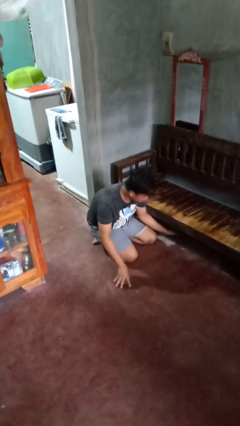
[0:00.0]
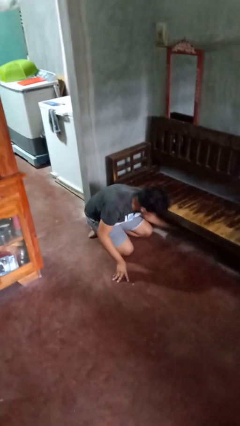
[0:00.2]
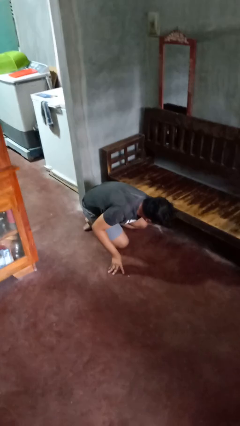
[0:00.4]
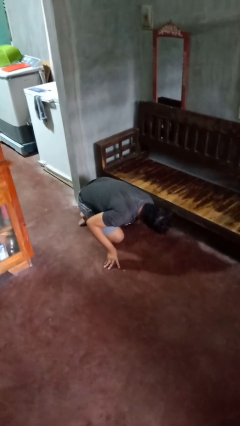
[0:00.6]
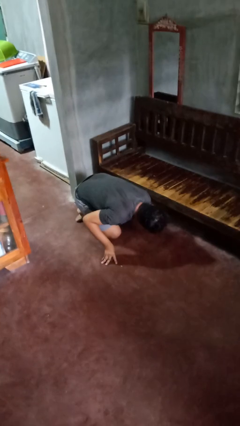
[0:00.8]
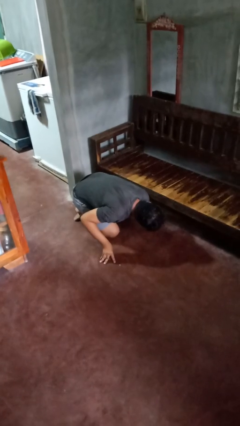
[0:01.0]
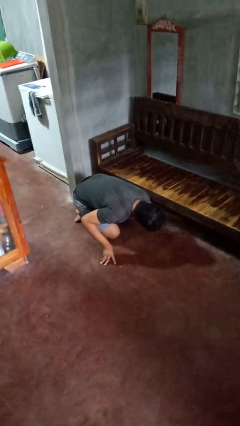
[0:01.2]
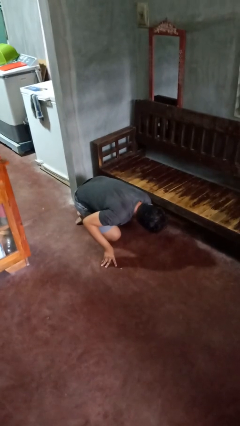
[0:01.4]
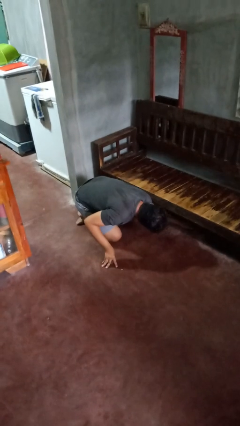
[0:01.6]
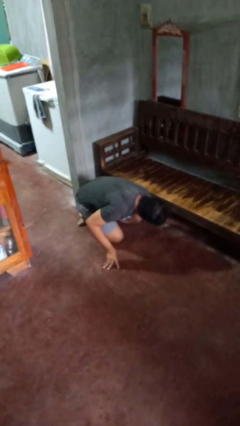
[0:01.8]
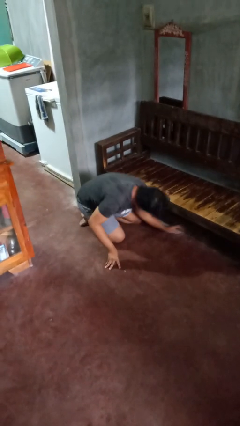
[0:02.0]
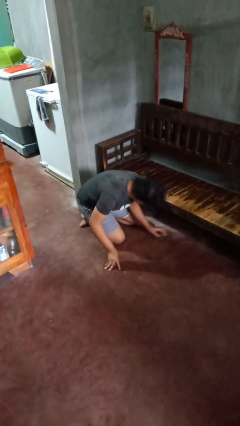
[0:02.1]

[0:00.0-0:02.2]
person searches under couch

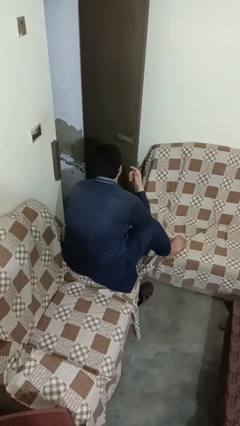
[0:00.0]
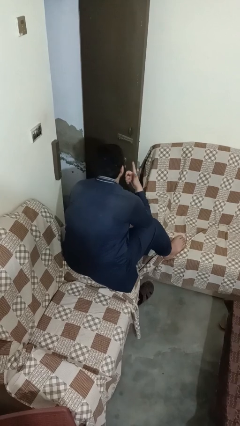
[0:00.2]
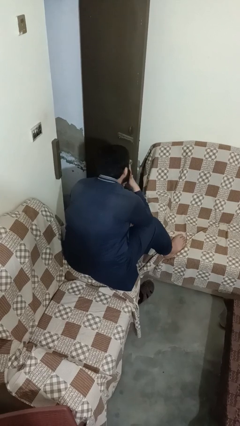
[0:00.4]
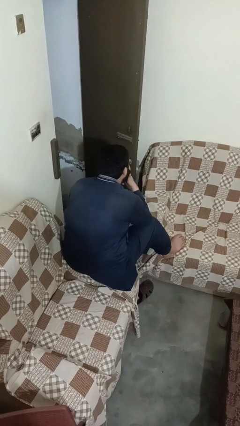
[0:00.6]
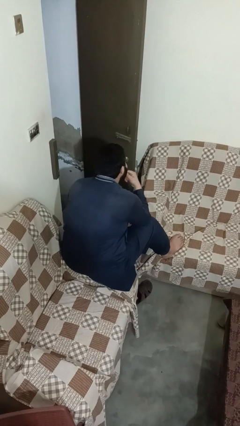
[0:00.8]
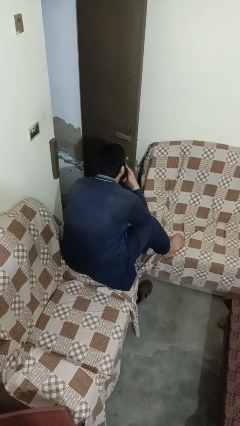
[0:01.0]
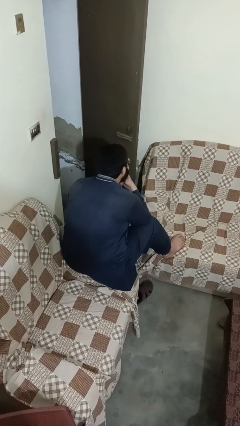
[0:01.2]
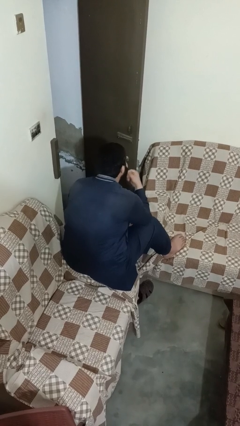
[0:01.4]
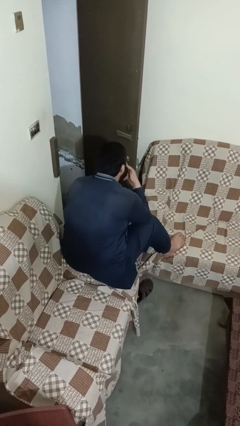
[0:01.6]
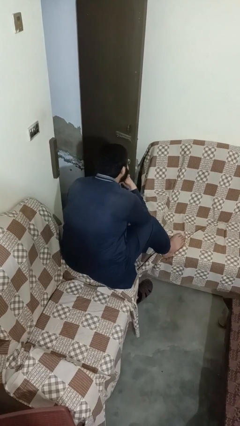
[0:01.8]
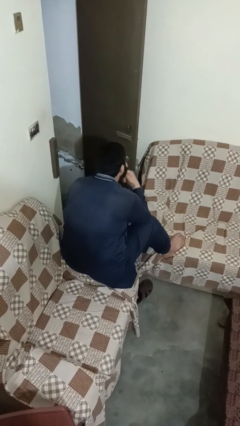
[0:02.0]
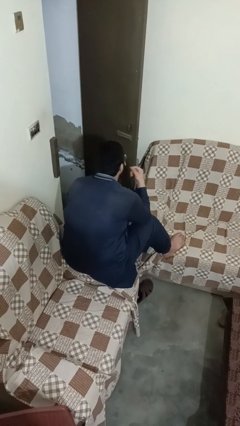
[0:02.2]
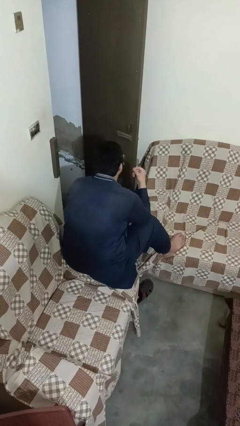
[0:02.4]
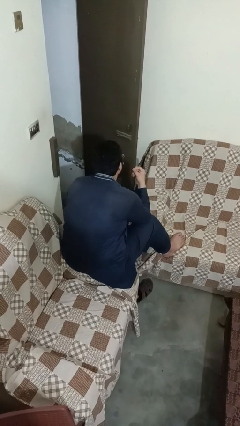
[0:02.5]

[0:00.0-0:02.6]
person strokes chin

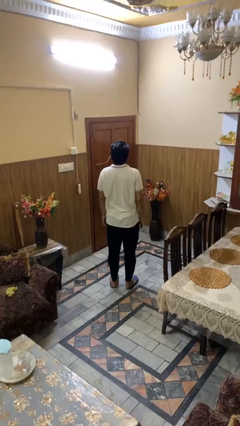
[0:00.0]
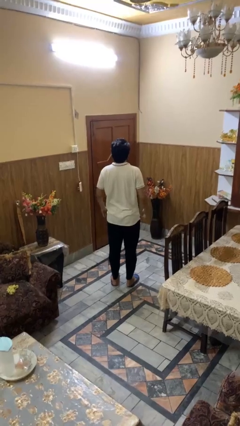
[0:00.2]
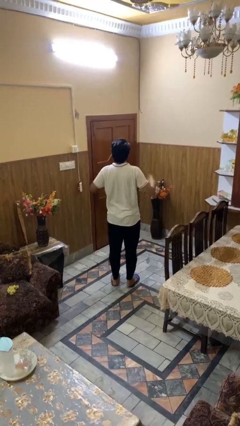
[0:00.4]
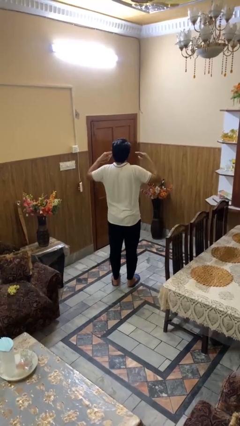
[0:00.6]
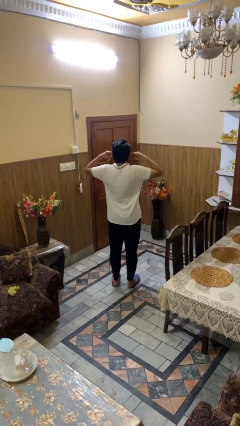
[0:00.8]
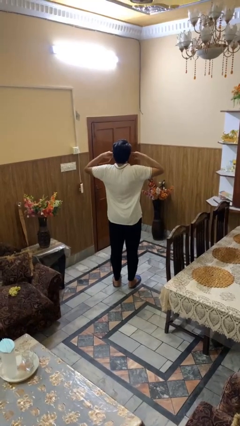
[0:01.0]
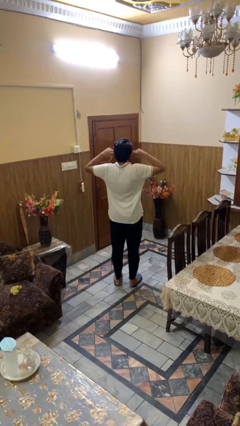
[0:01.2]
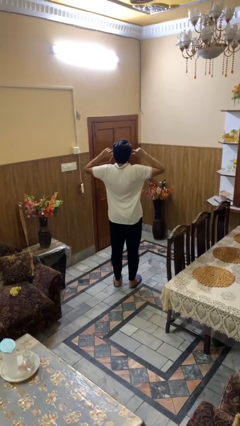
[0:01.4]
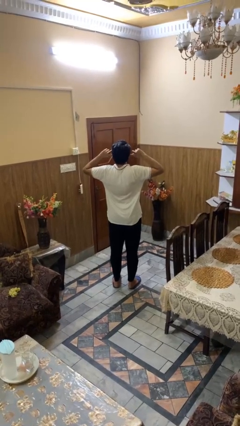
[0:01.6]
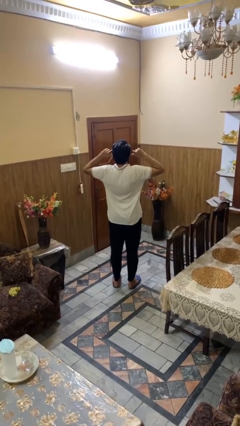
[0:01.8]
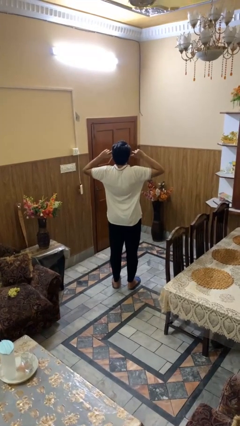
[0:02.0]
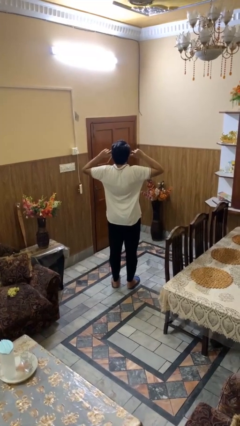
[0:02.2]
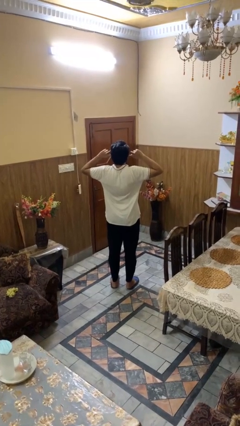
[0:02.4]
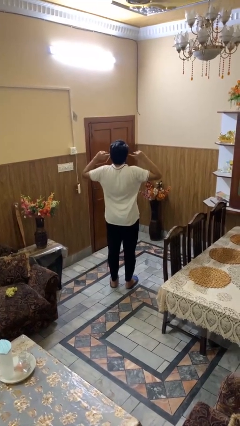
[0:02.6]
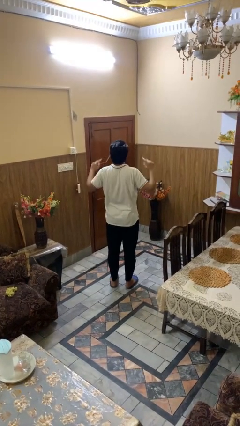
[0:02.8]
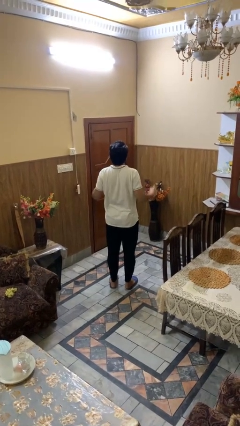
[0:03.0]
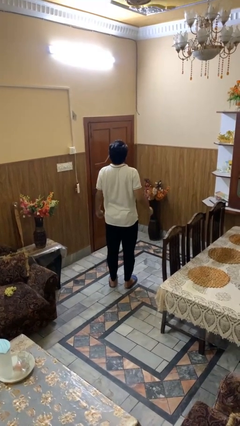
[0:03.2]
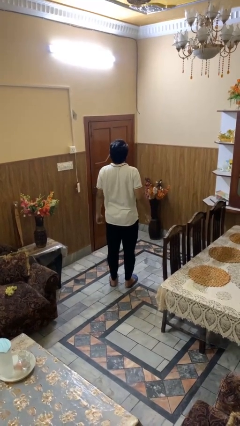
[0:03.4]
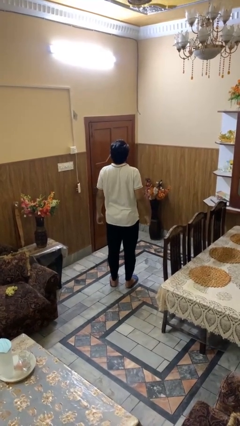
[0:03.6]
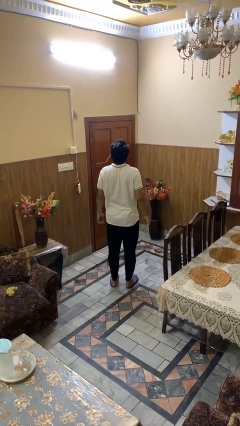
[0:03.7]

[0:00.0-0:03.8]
person puts fingers in ear

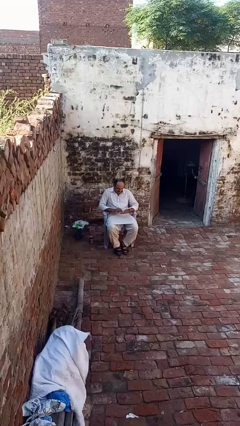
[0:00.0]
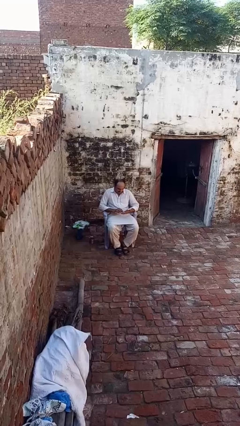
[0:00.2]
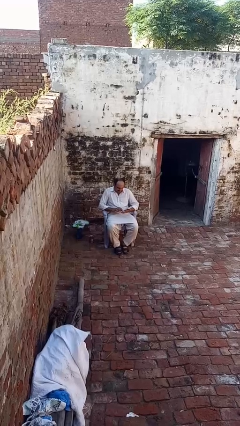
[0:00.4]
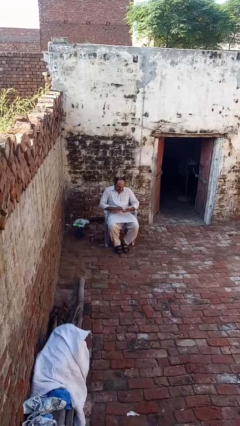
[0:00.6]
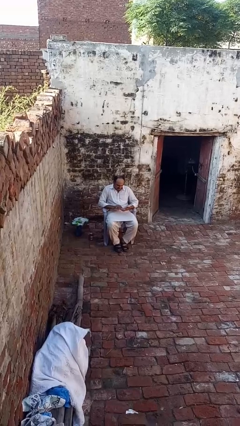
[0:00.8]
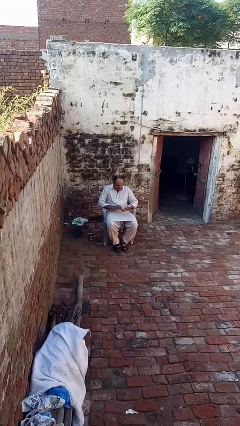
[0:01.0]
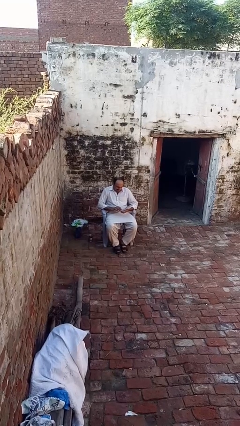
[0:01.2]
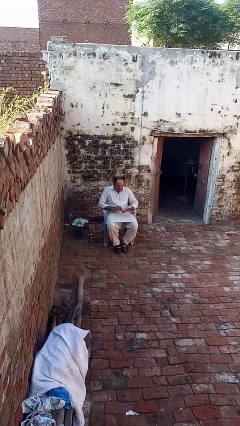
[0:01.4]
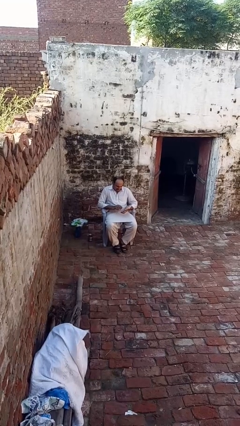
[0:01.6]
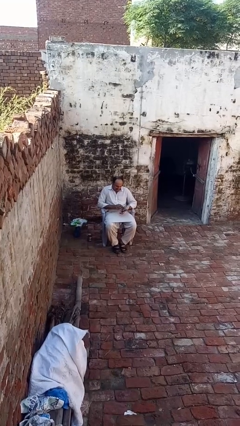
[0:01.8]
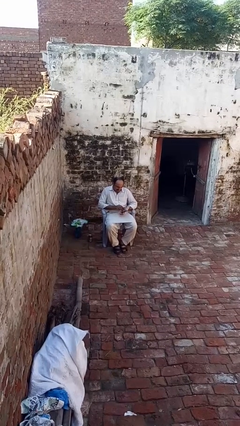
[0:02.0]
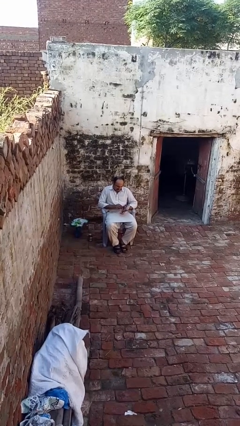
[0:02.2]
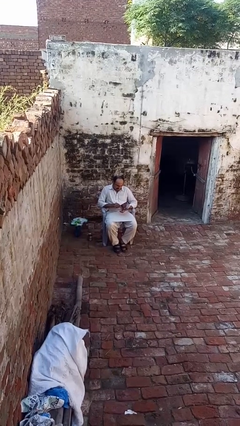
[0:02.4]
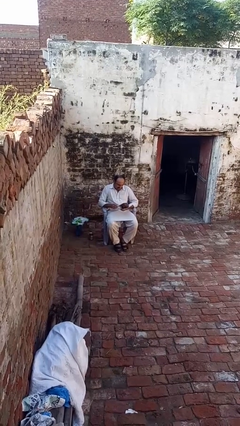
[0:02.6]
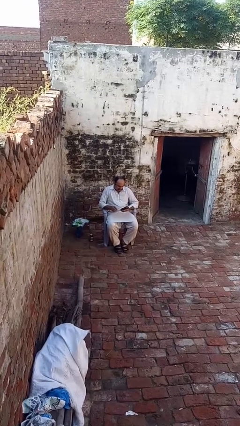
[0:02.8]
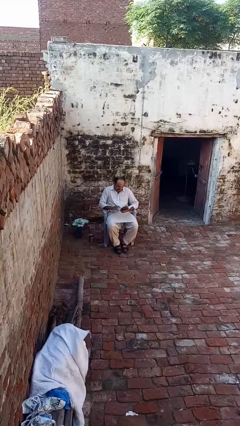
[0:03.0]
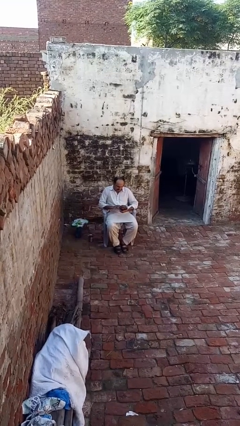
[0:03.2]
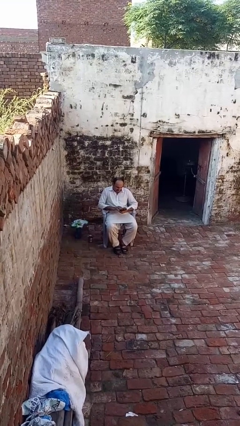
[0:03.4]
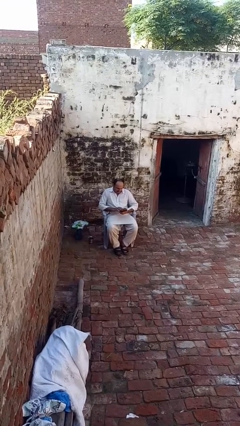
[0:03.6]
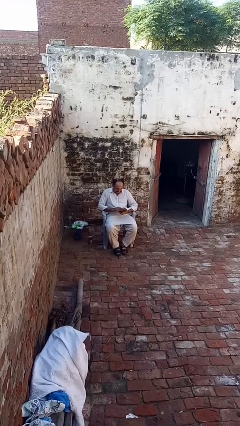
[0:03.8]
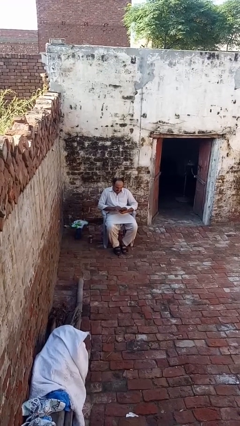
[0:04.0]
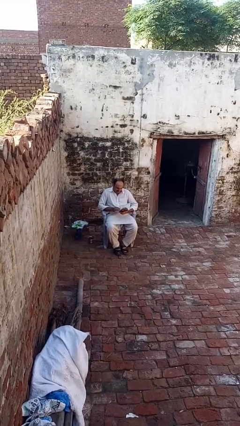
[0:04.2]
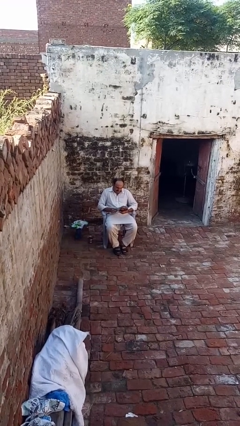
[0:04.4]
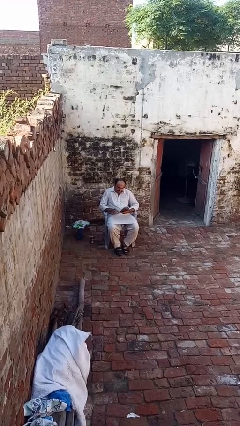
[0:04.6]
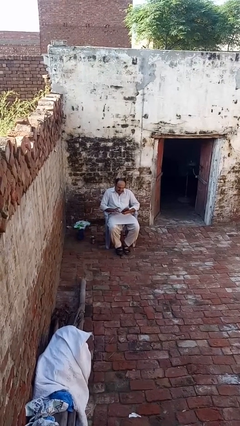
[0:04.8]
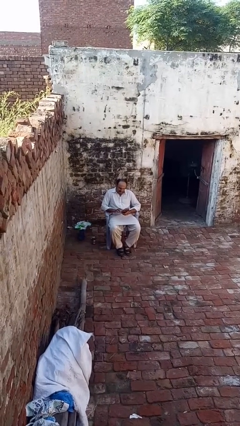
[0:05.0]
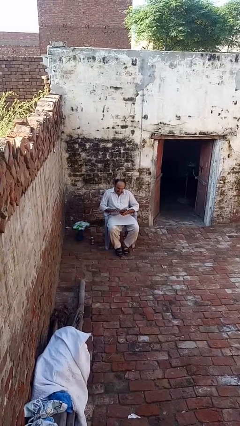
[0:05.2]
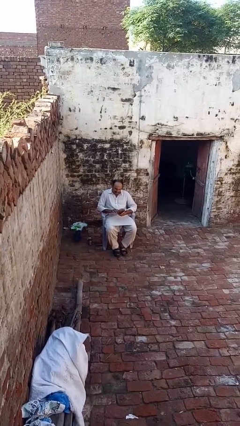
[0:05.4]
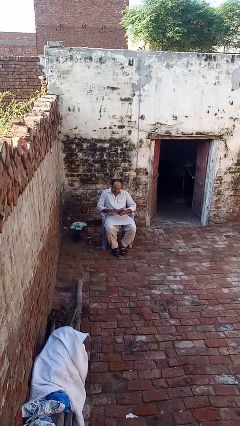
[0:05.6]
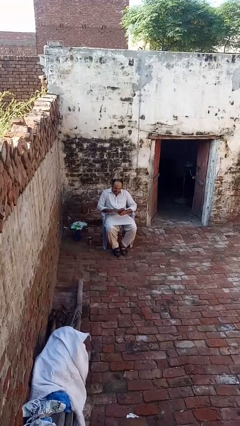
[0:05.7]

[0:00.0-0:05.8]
person reads book

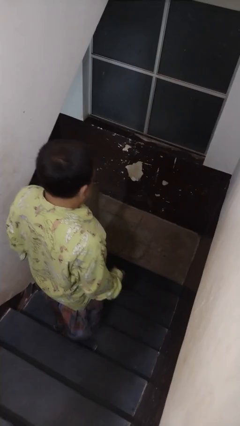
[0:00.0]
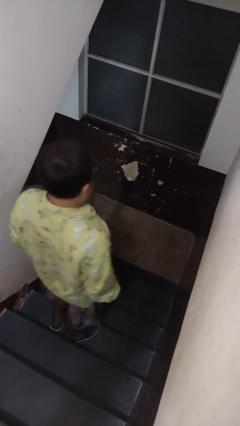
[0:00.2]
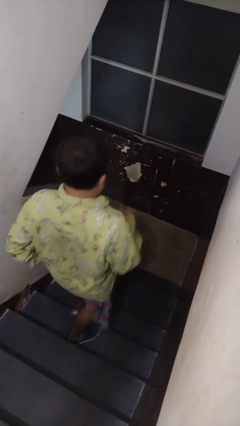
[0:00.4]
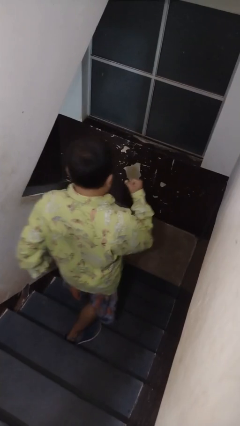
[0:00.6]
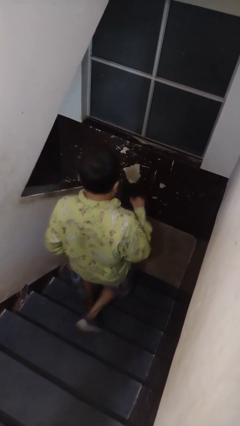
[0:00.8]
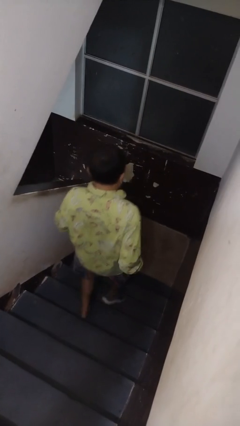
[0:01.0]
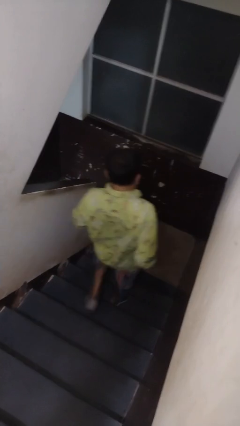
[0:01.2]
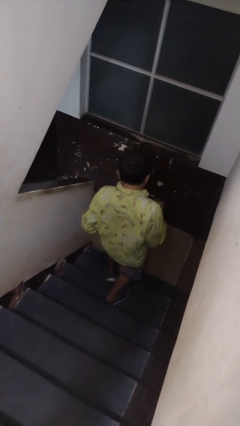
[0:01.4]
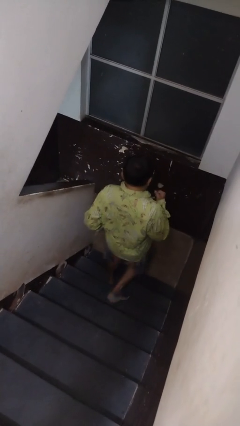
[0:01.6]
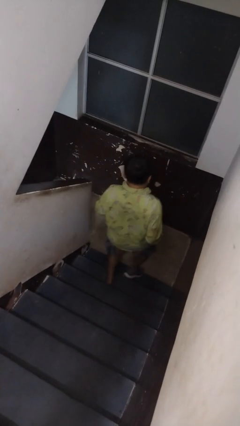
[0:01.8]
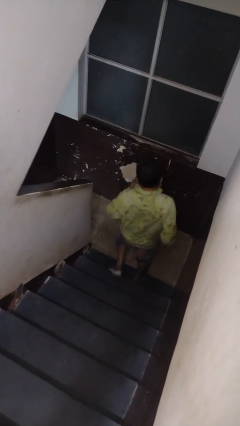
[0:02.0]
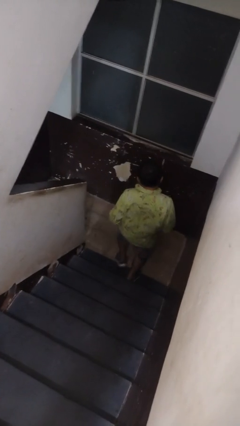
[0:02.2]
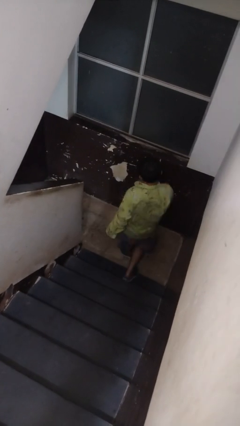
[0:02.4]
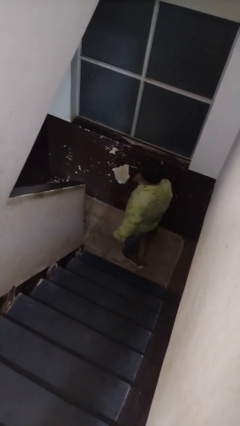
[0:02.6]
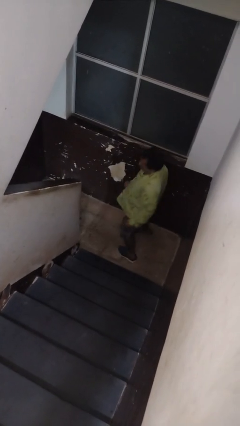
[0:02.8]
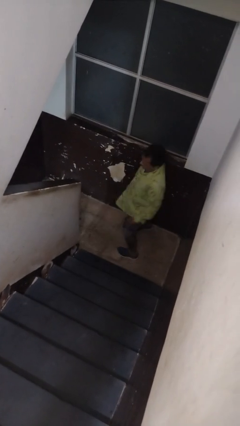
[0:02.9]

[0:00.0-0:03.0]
person climbs down stairs
